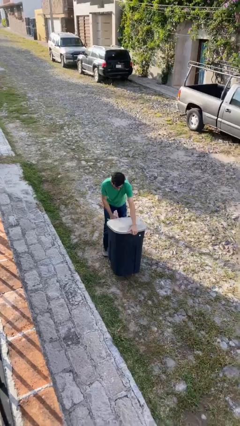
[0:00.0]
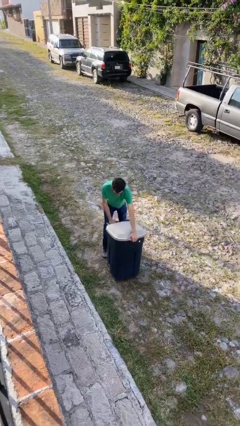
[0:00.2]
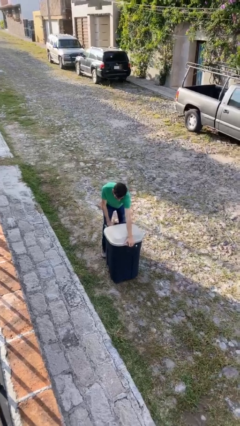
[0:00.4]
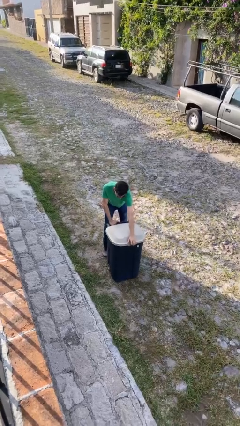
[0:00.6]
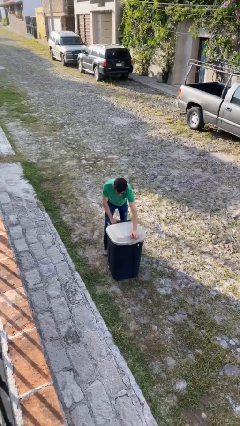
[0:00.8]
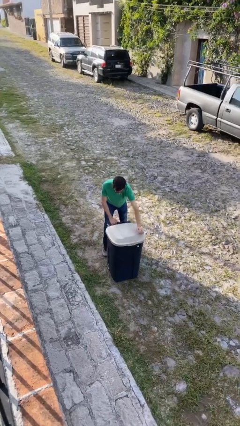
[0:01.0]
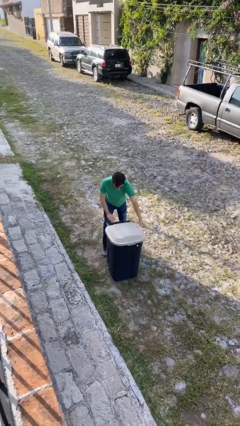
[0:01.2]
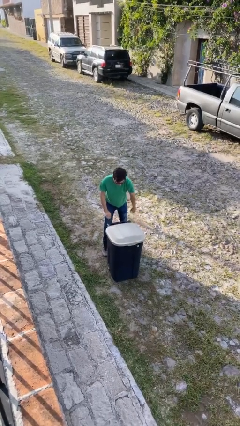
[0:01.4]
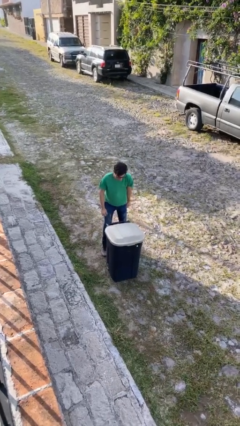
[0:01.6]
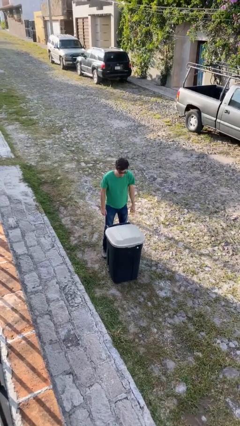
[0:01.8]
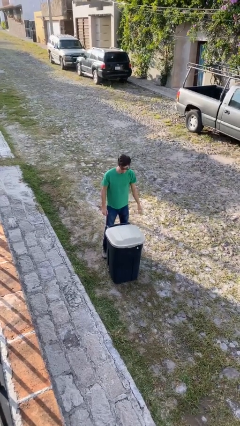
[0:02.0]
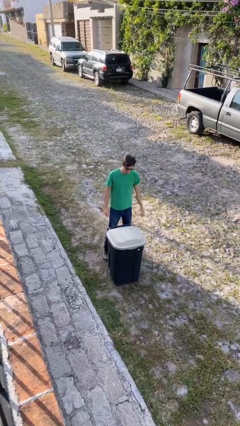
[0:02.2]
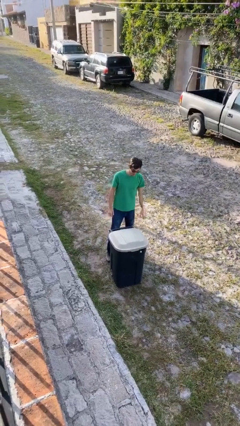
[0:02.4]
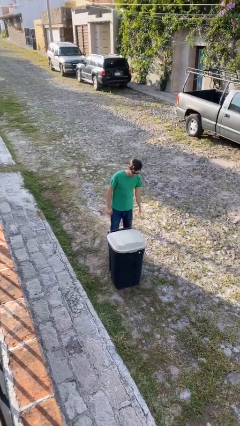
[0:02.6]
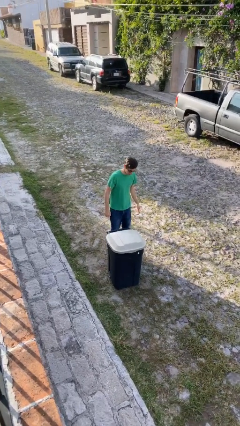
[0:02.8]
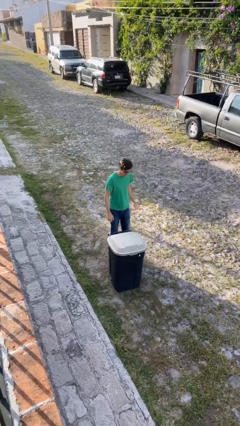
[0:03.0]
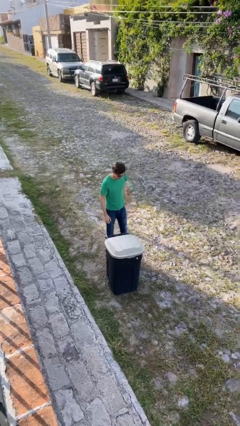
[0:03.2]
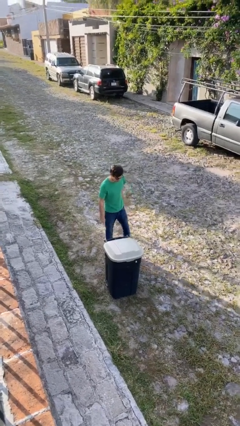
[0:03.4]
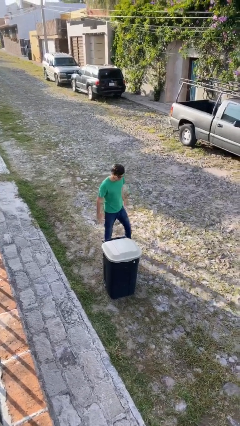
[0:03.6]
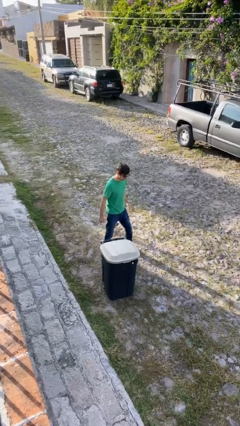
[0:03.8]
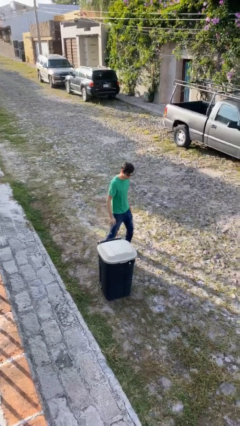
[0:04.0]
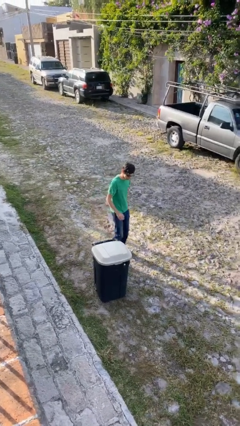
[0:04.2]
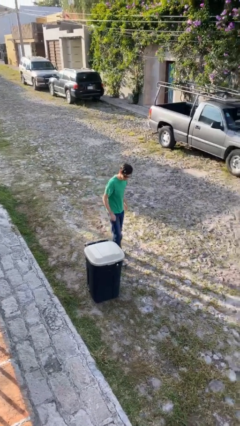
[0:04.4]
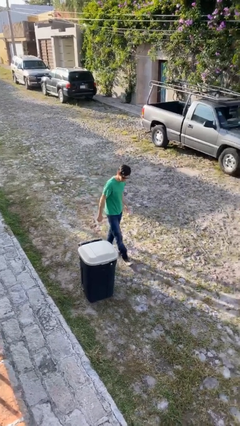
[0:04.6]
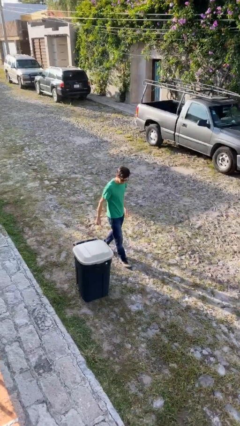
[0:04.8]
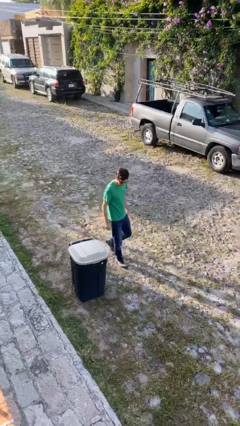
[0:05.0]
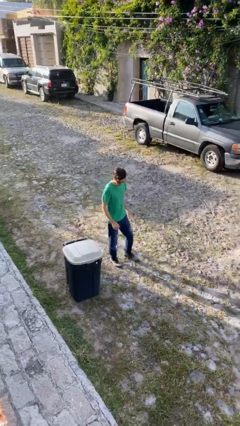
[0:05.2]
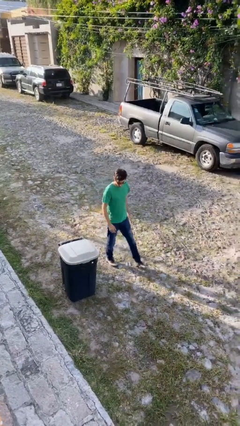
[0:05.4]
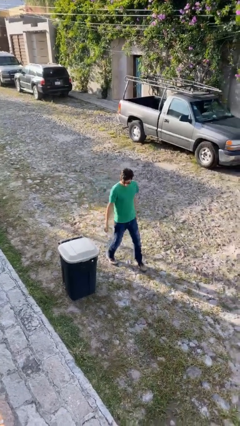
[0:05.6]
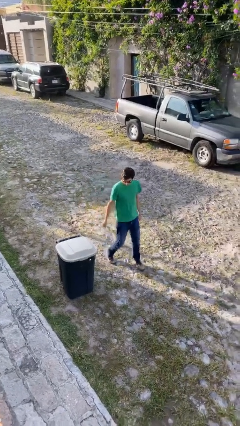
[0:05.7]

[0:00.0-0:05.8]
person puts down object on floor

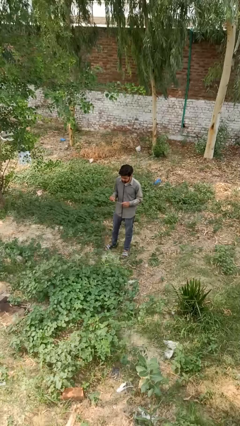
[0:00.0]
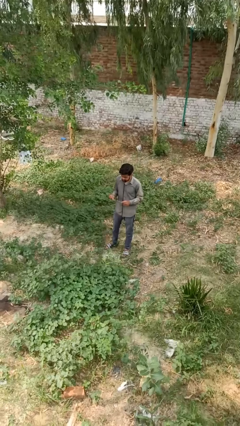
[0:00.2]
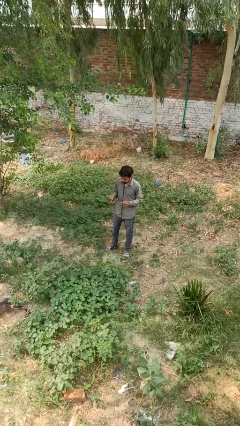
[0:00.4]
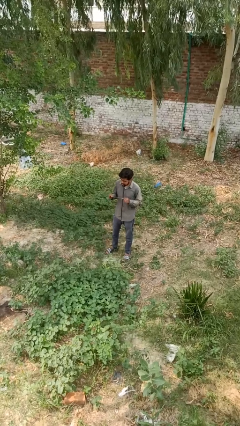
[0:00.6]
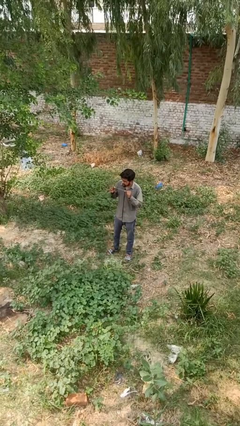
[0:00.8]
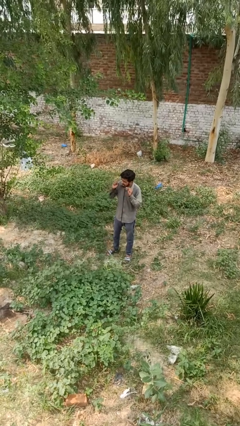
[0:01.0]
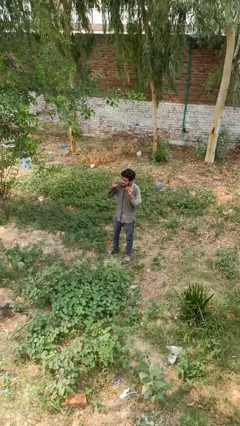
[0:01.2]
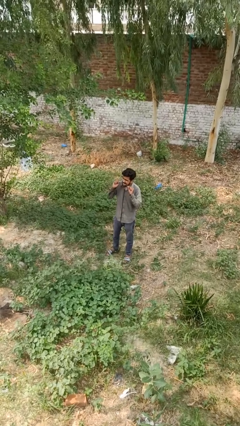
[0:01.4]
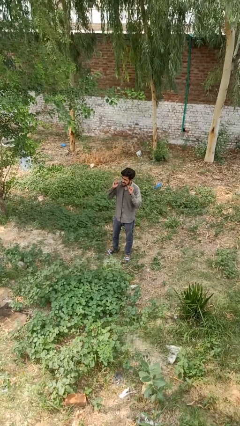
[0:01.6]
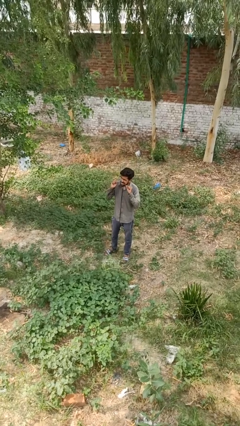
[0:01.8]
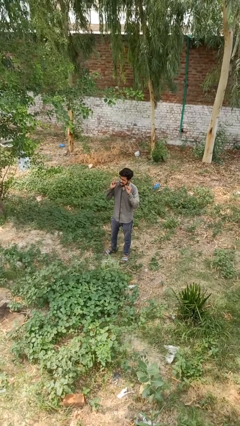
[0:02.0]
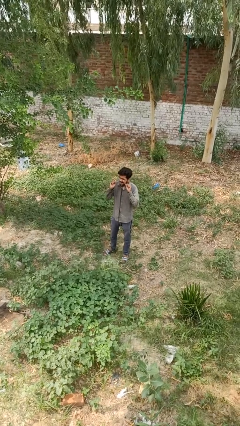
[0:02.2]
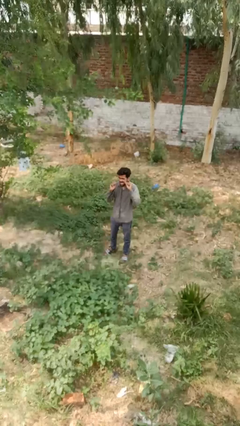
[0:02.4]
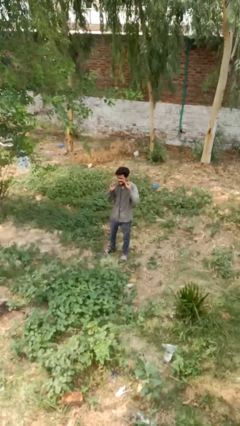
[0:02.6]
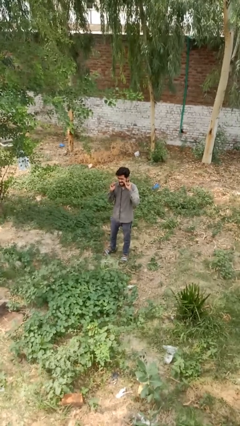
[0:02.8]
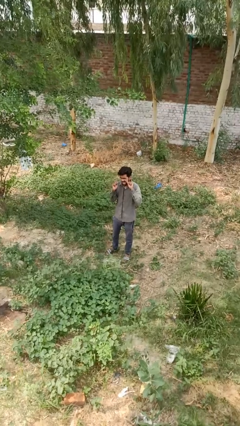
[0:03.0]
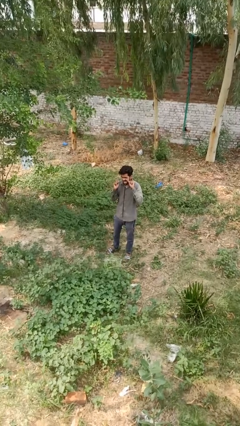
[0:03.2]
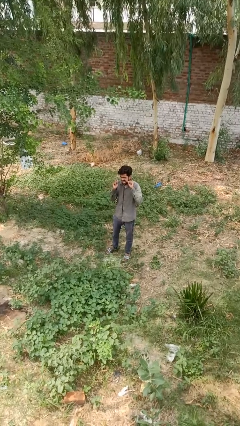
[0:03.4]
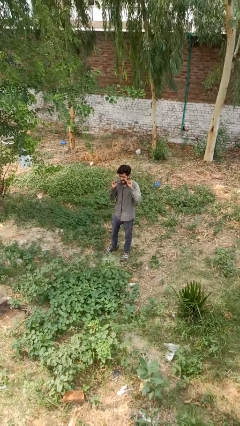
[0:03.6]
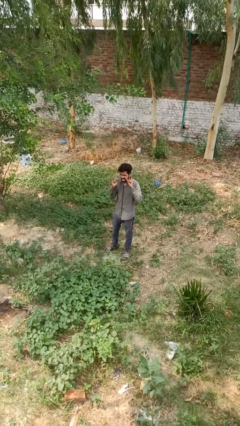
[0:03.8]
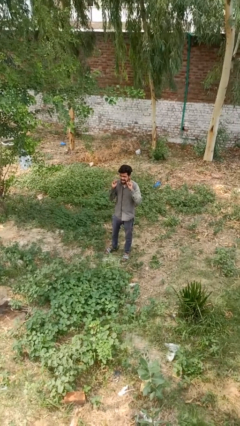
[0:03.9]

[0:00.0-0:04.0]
person flosses

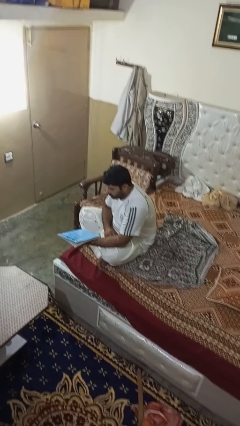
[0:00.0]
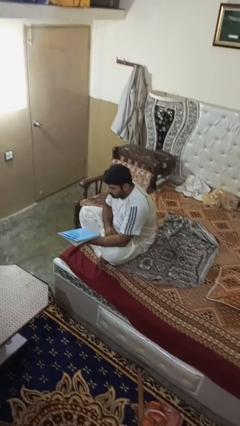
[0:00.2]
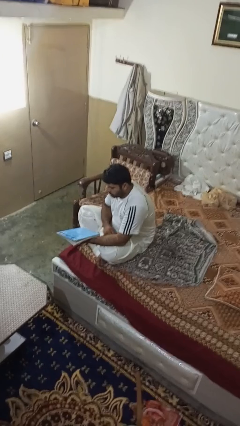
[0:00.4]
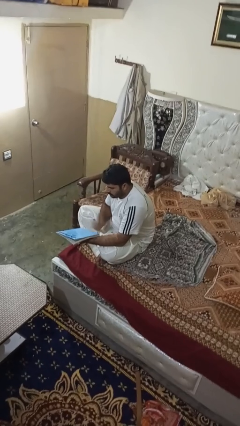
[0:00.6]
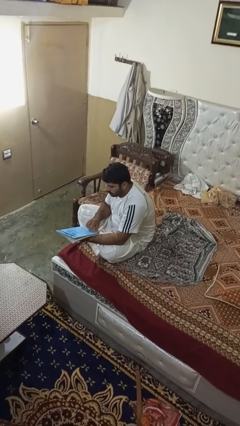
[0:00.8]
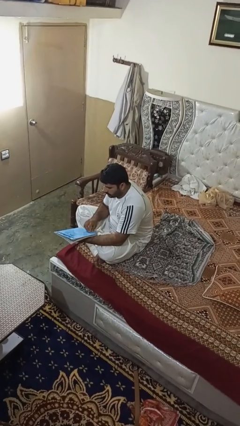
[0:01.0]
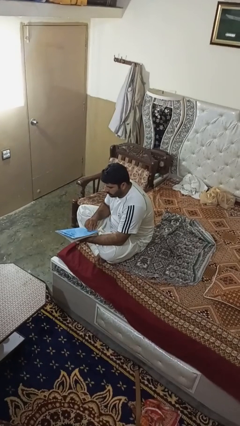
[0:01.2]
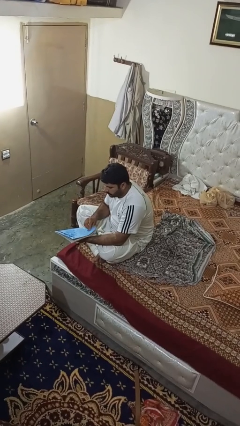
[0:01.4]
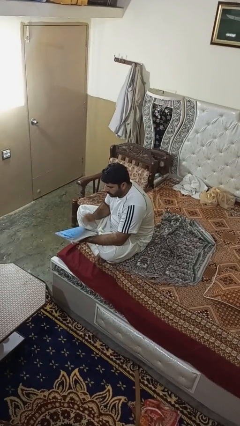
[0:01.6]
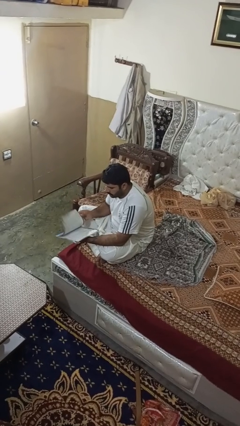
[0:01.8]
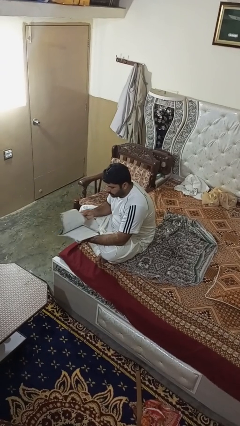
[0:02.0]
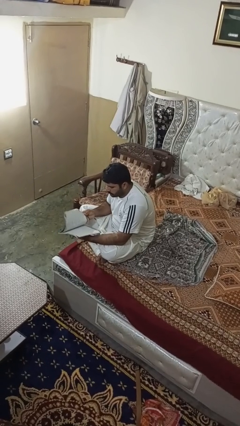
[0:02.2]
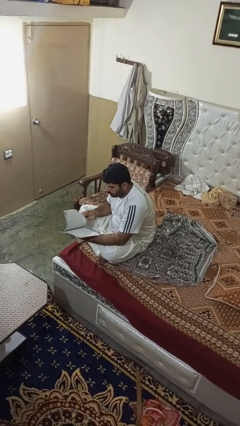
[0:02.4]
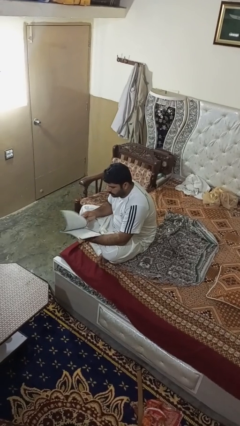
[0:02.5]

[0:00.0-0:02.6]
person reads magazine

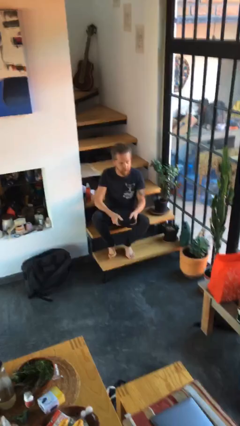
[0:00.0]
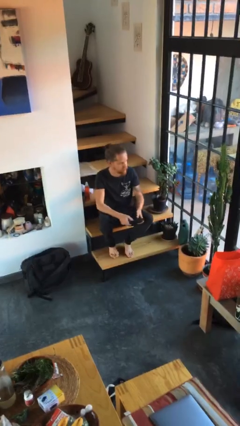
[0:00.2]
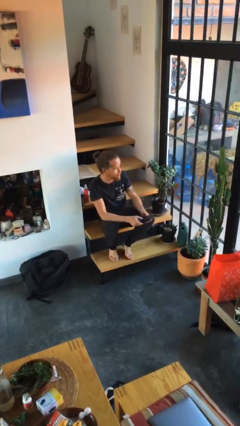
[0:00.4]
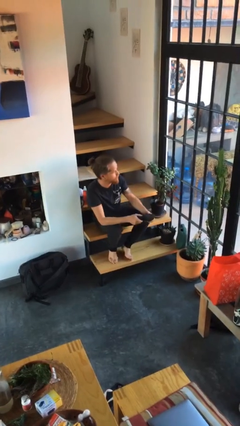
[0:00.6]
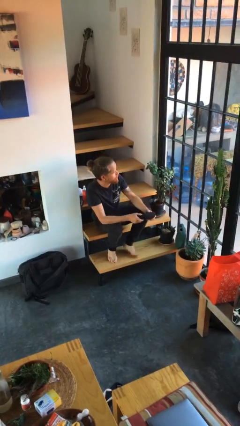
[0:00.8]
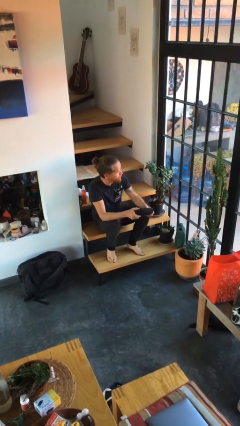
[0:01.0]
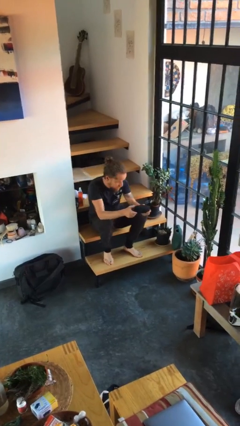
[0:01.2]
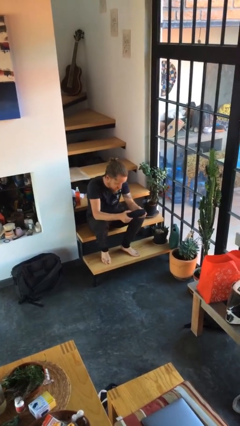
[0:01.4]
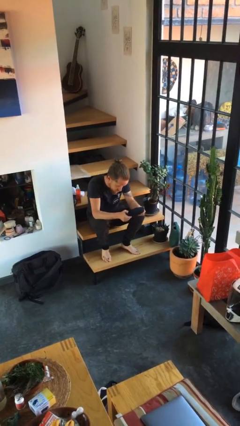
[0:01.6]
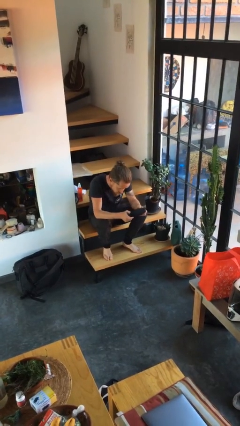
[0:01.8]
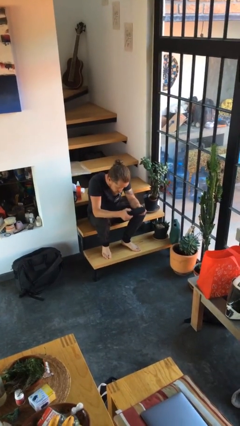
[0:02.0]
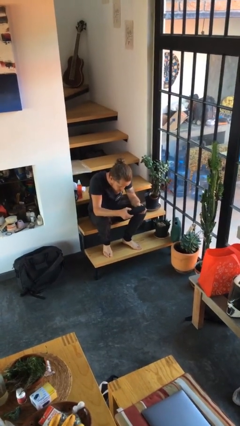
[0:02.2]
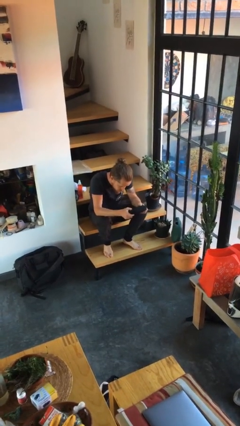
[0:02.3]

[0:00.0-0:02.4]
person interacts with handheld game

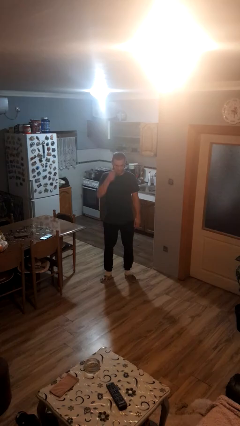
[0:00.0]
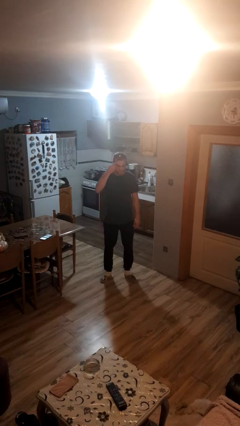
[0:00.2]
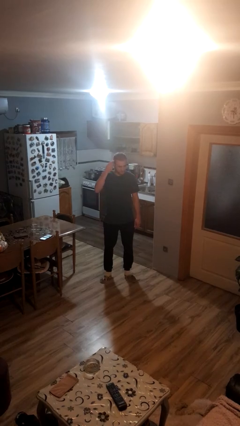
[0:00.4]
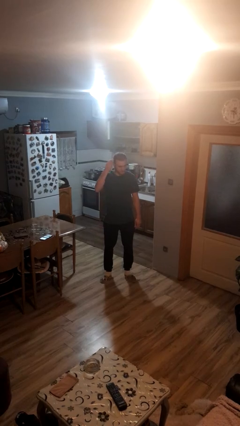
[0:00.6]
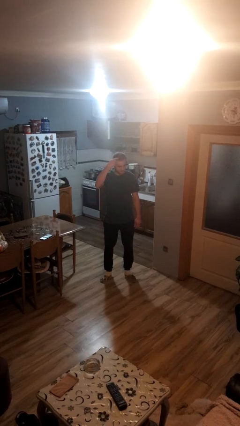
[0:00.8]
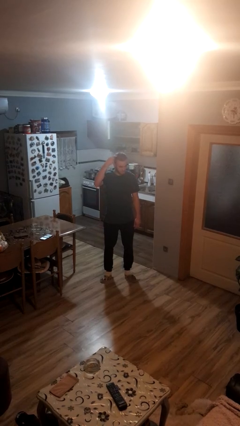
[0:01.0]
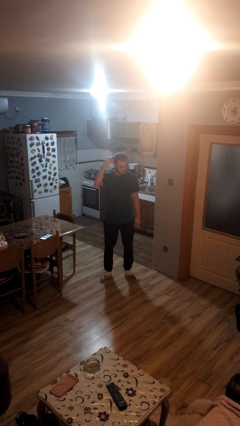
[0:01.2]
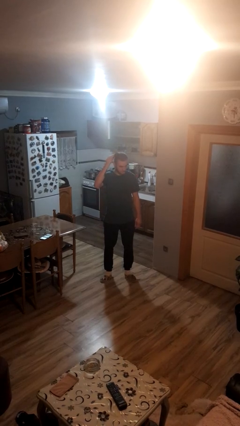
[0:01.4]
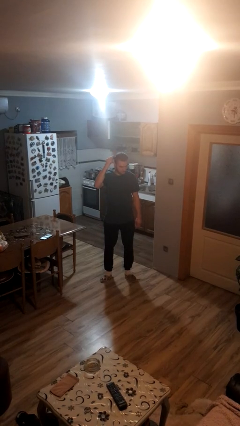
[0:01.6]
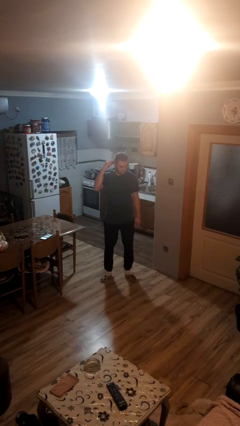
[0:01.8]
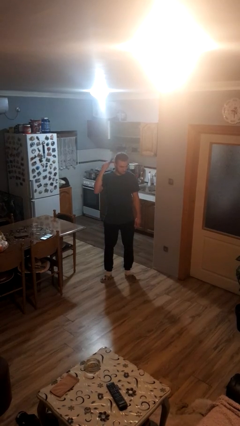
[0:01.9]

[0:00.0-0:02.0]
person brushes hair

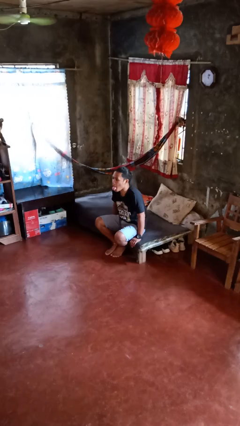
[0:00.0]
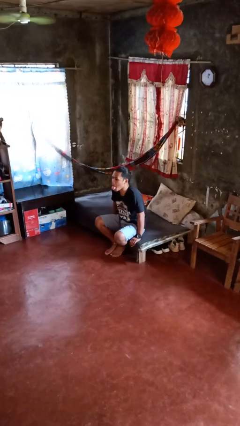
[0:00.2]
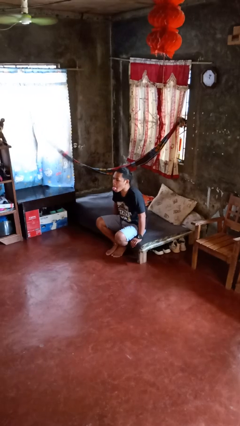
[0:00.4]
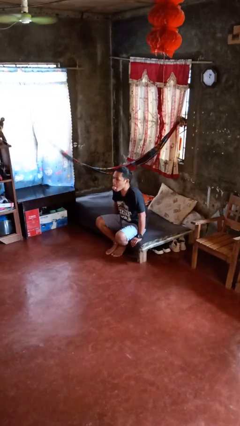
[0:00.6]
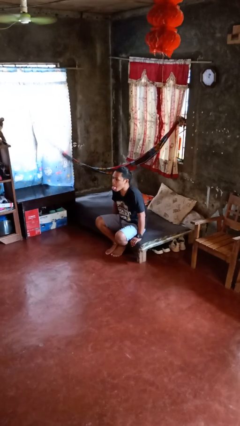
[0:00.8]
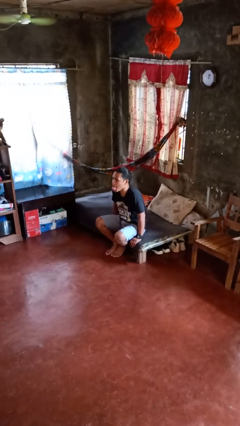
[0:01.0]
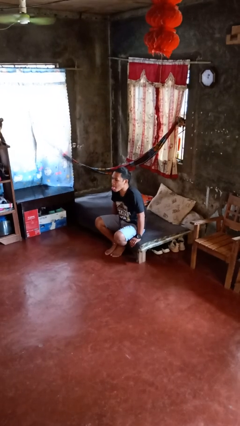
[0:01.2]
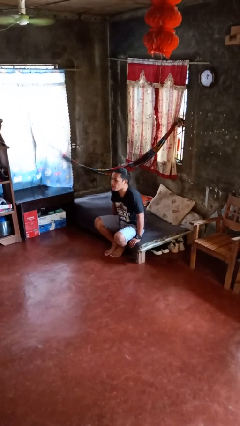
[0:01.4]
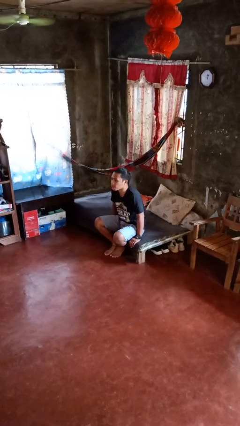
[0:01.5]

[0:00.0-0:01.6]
person sticks out tongue
